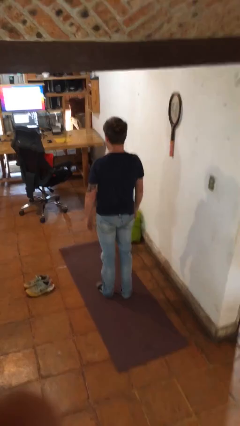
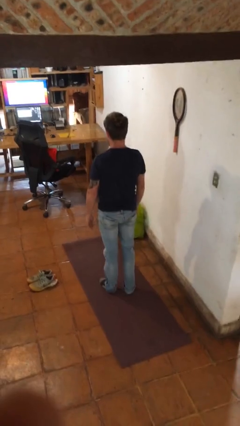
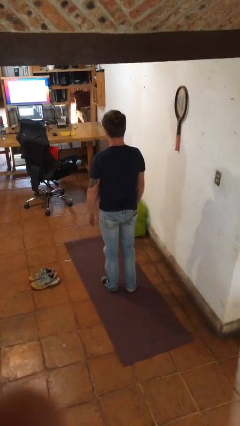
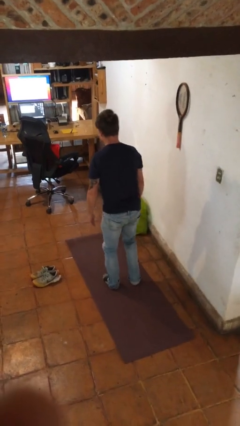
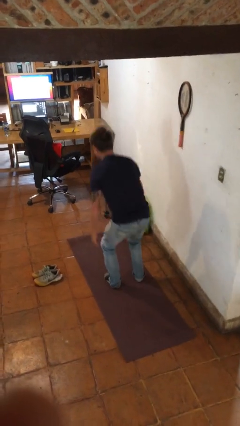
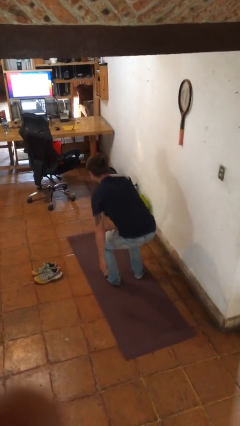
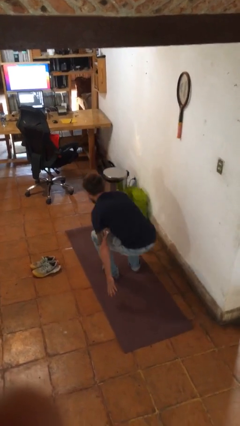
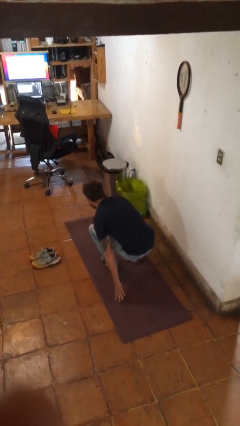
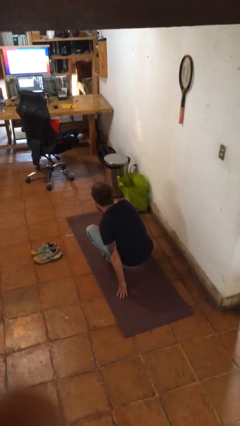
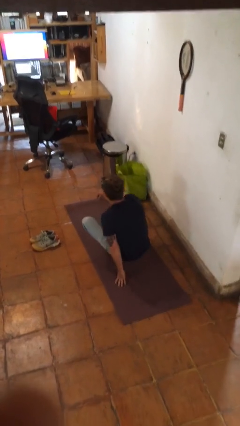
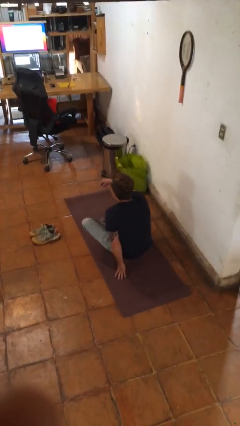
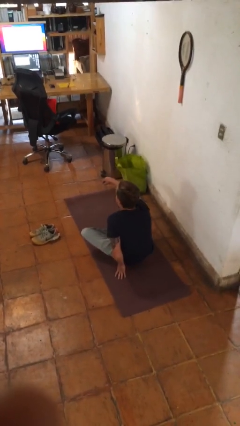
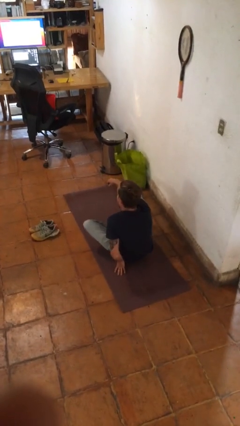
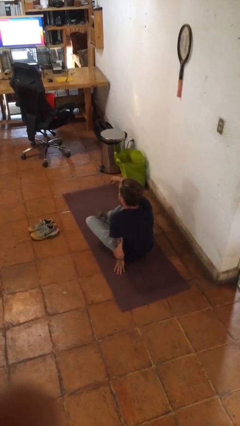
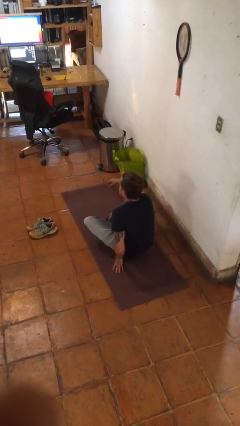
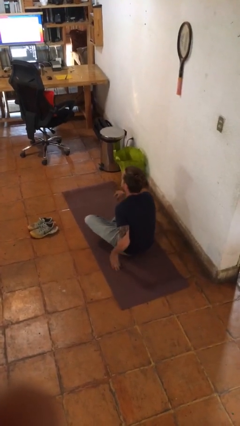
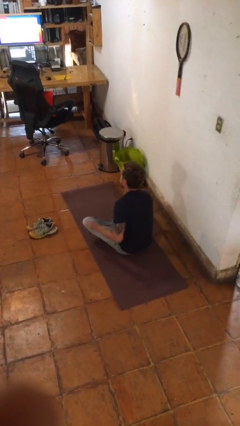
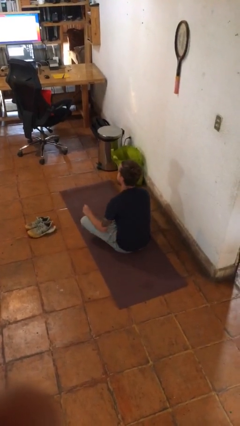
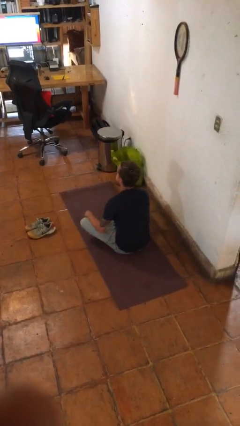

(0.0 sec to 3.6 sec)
person sits crisscross

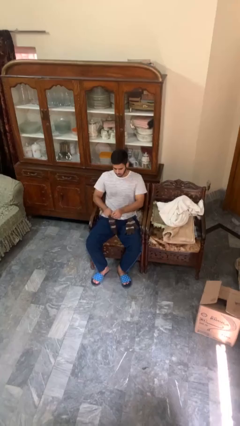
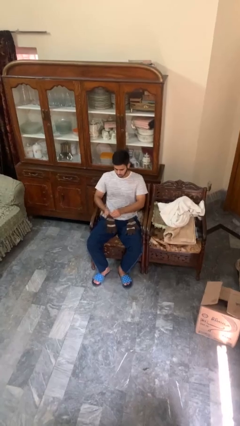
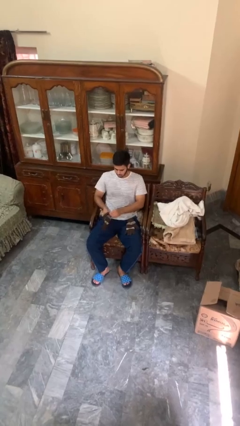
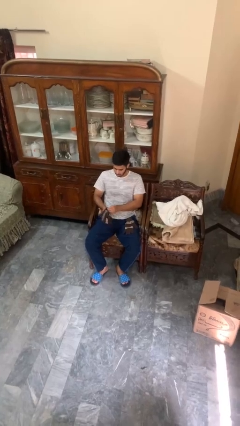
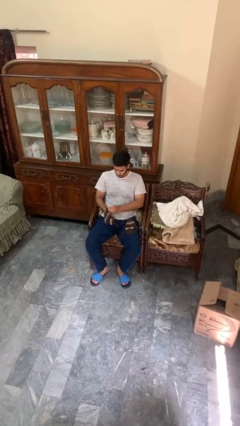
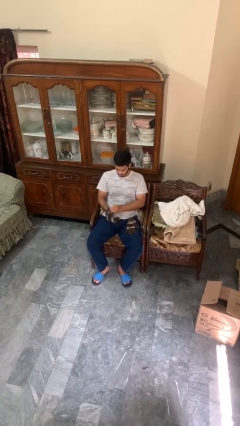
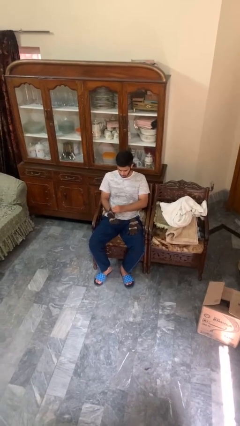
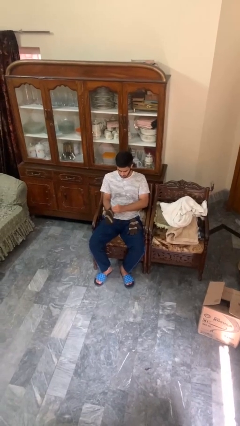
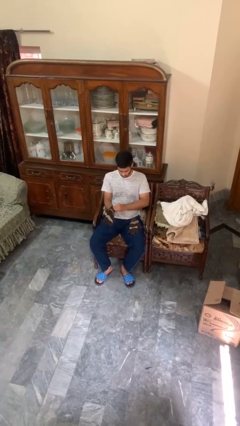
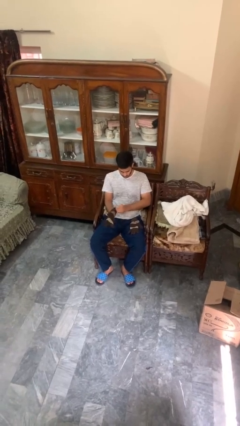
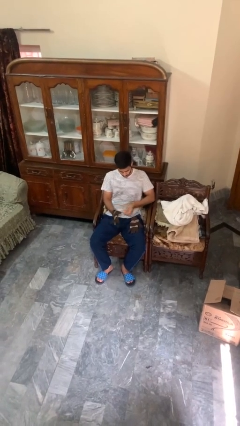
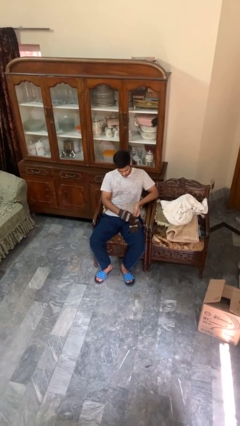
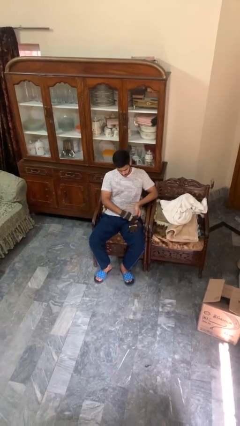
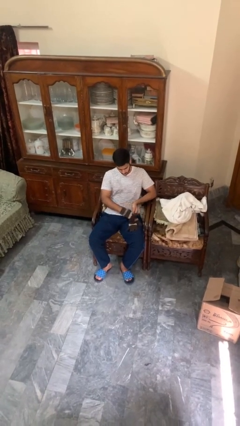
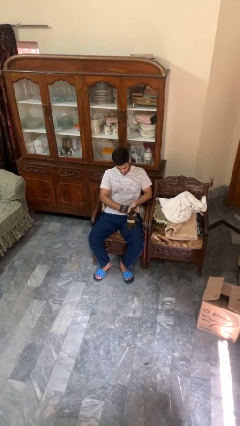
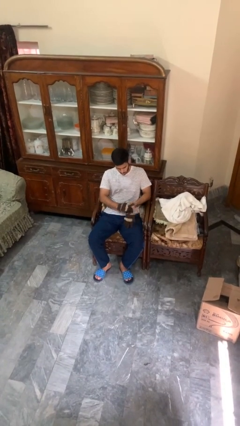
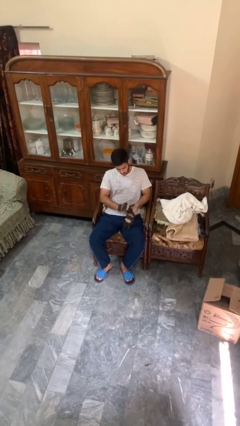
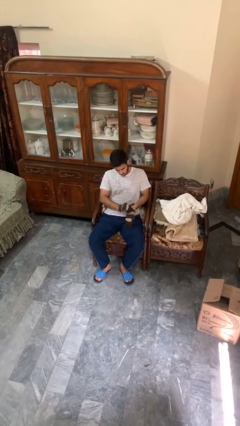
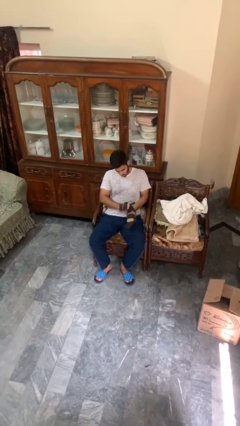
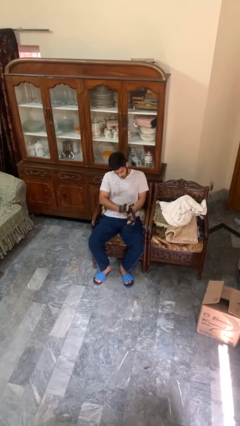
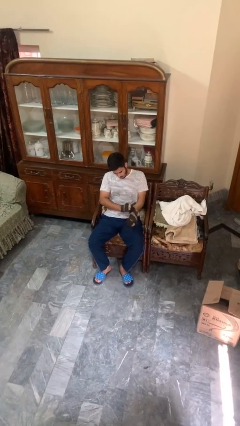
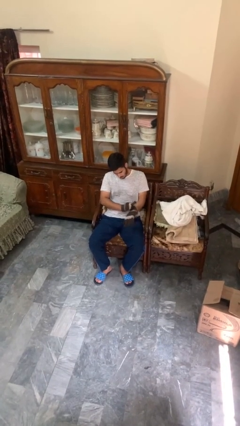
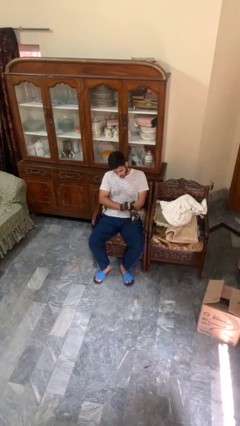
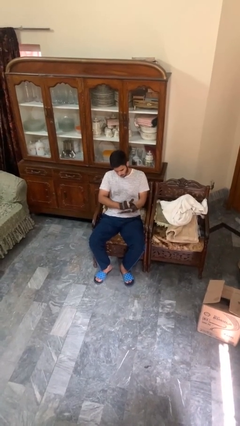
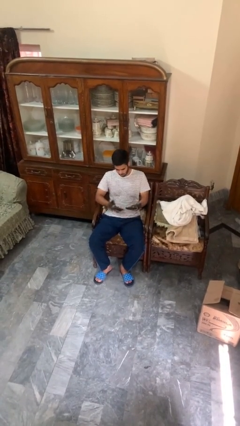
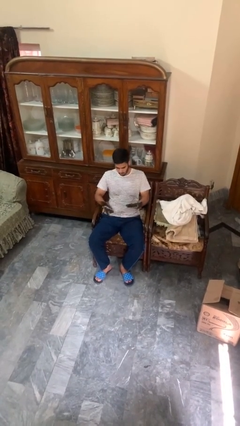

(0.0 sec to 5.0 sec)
person puts on gloves

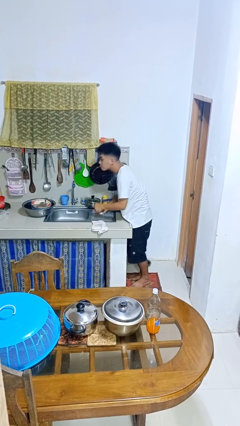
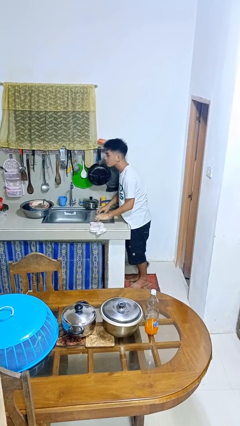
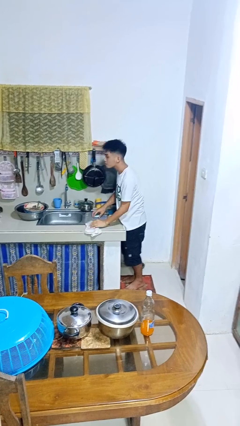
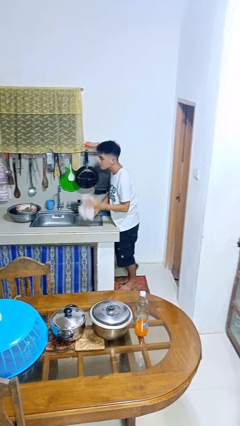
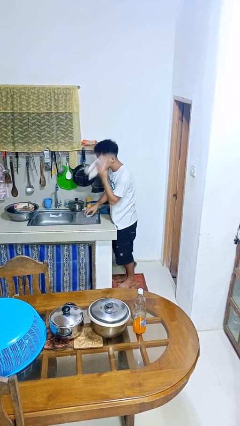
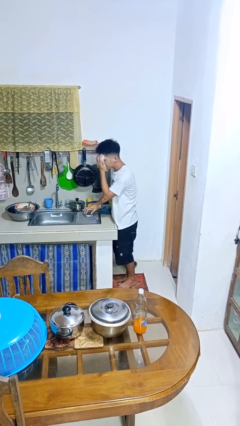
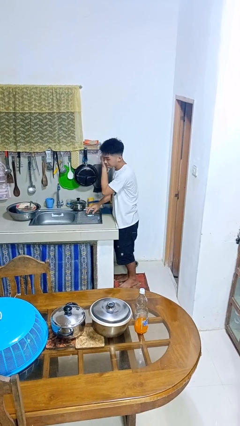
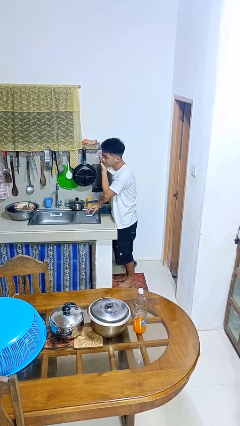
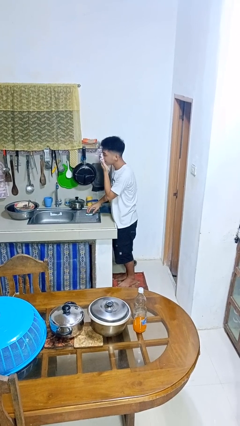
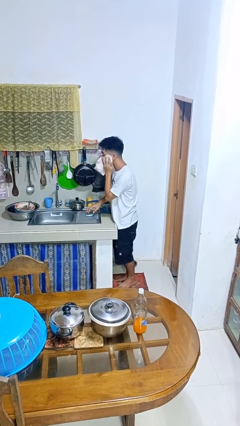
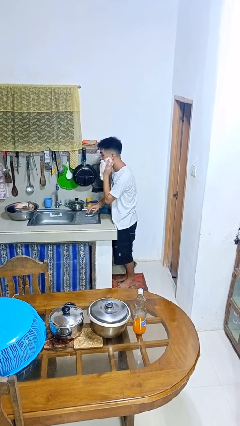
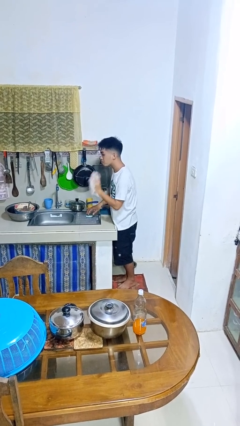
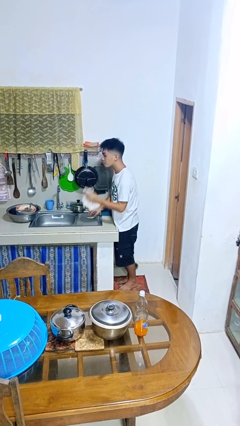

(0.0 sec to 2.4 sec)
person dries face with towel

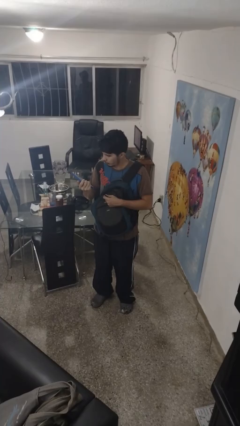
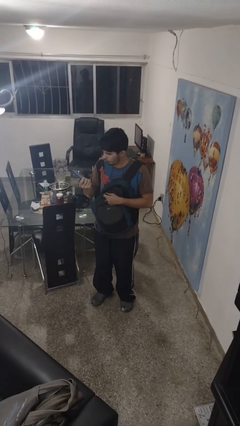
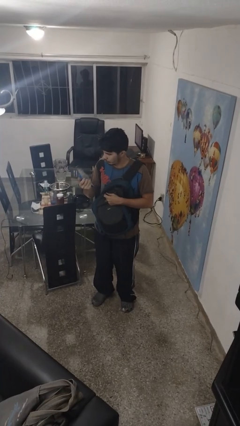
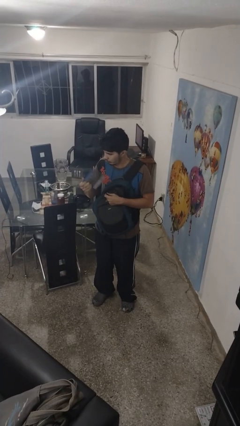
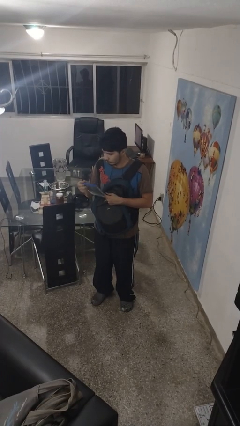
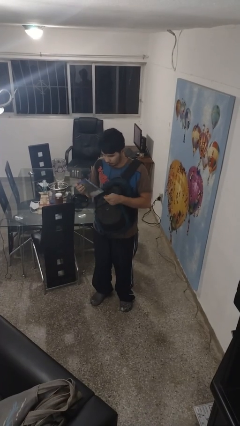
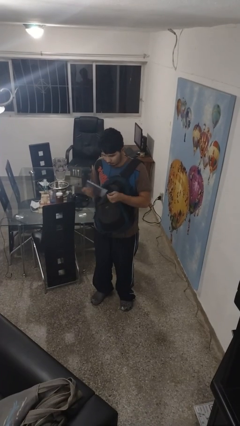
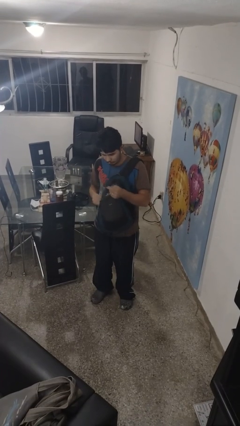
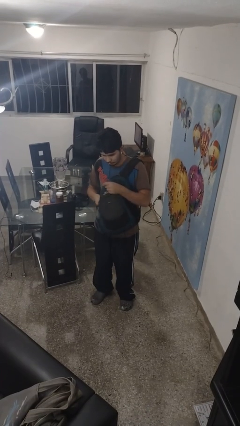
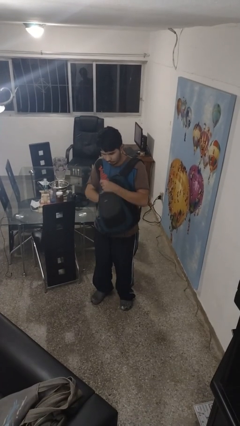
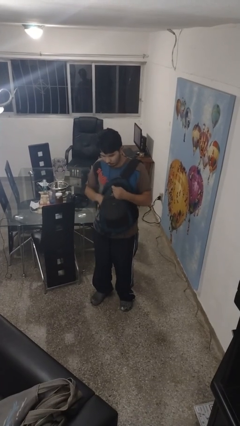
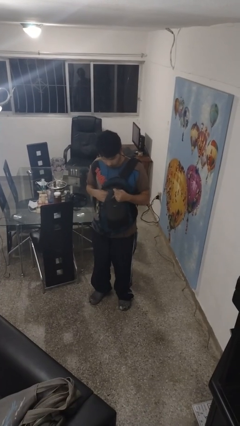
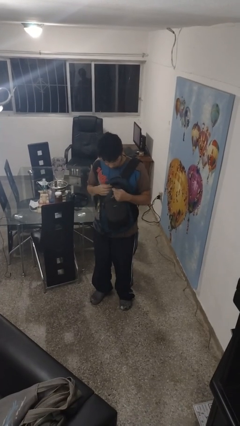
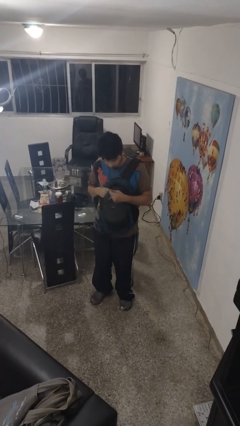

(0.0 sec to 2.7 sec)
person puts object into backpack

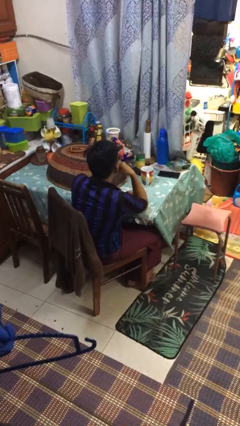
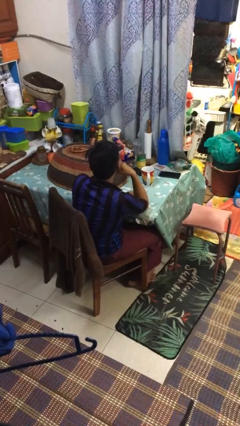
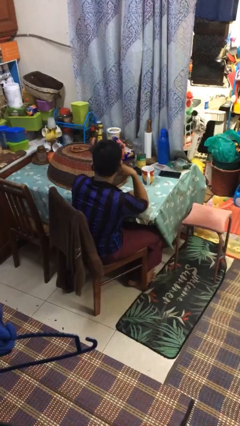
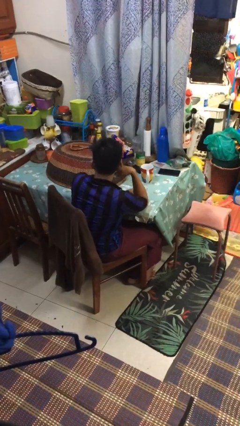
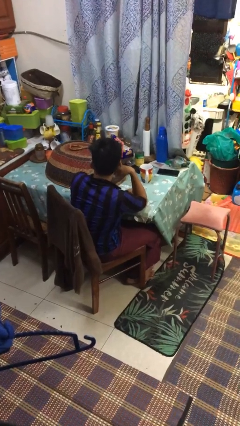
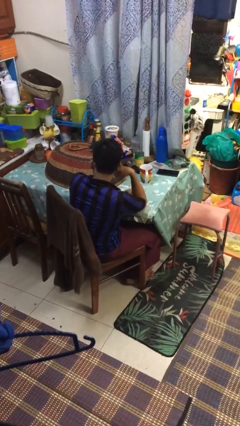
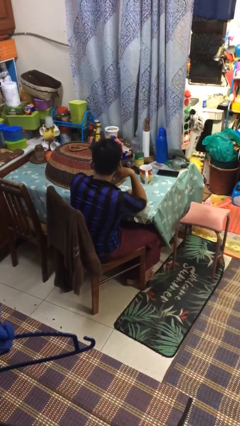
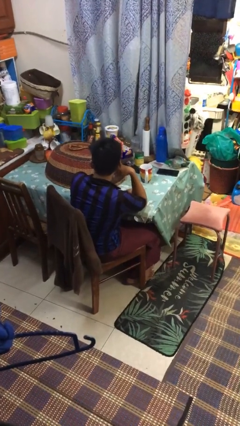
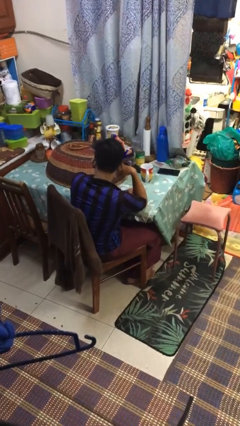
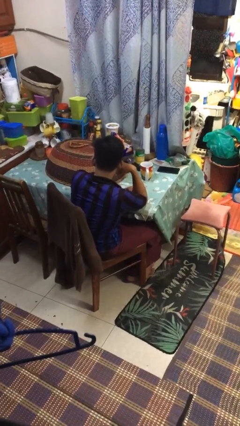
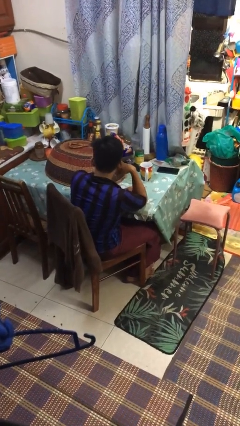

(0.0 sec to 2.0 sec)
person nods head

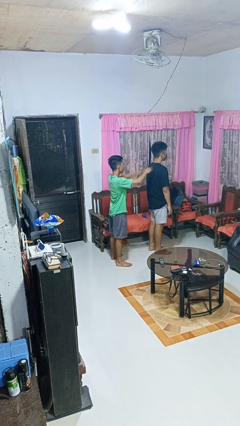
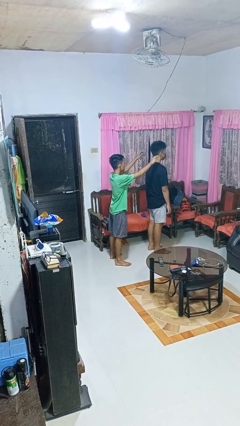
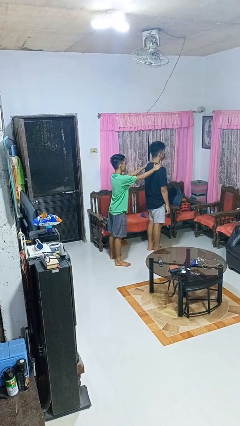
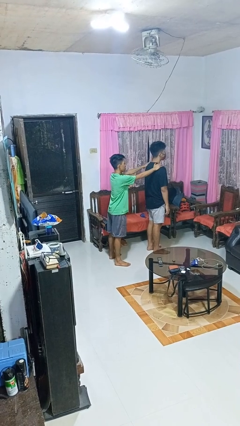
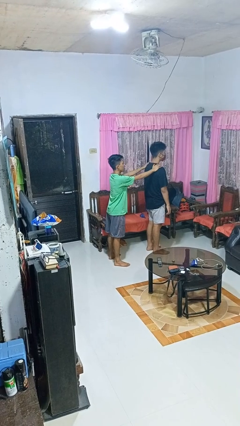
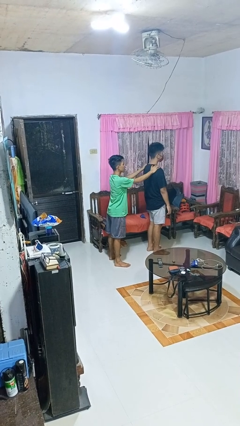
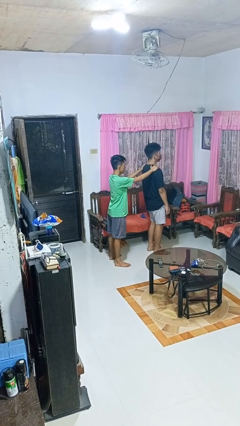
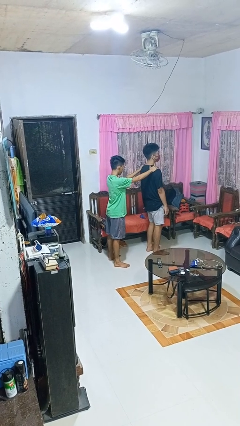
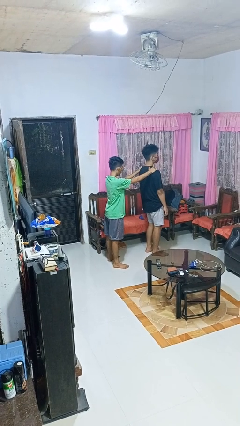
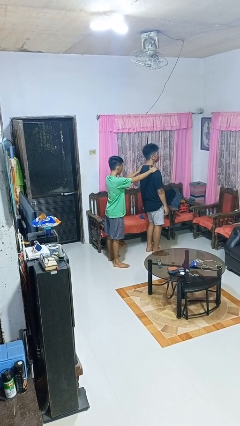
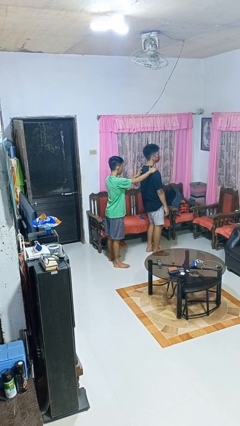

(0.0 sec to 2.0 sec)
person grabs person by shoulder
